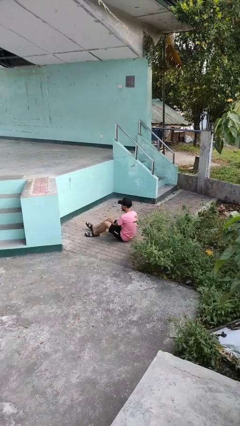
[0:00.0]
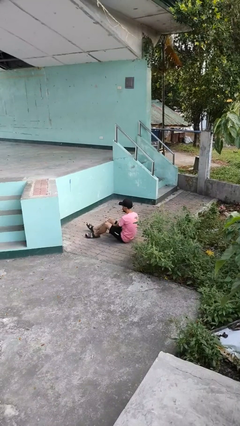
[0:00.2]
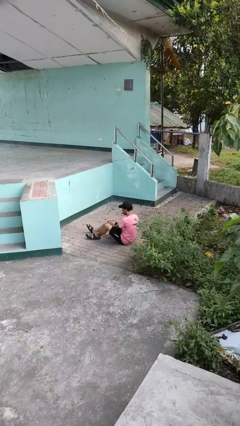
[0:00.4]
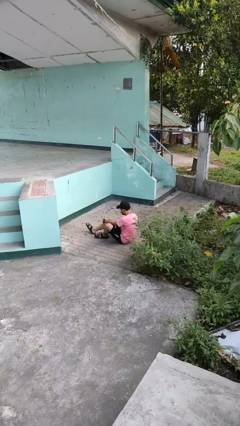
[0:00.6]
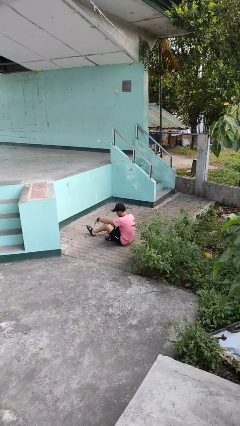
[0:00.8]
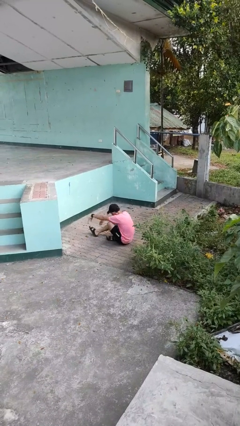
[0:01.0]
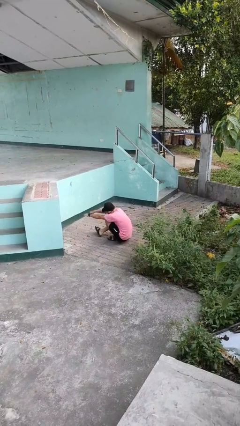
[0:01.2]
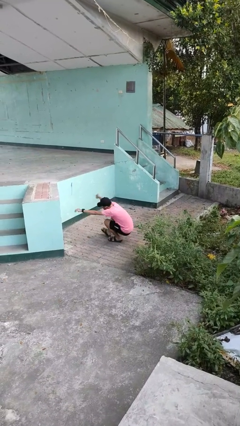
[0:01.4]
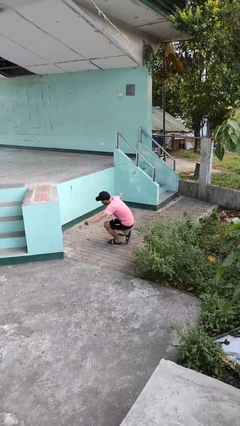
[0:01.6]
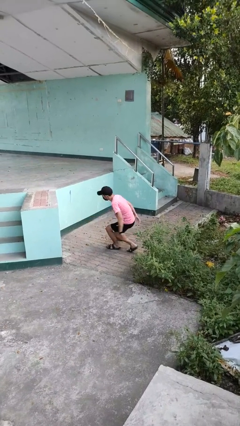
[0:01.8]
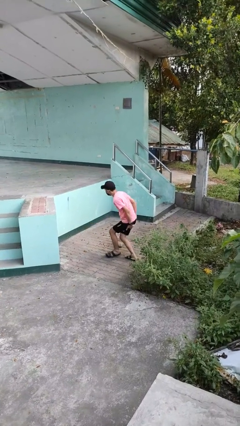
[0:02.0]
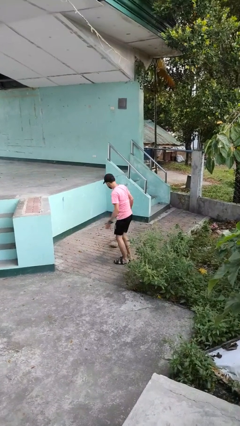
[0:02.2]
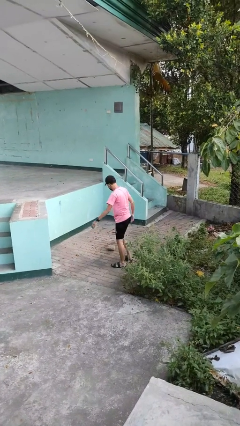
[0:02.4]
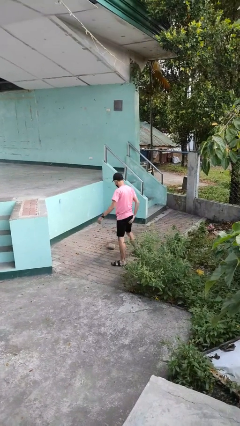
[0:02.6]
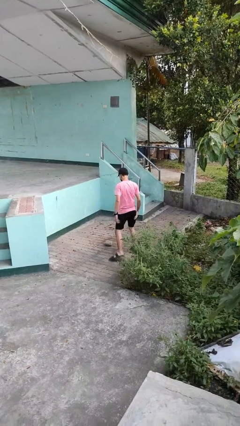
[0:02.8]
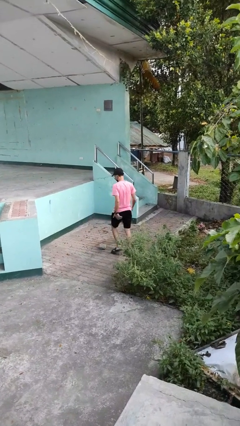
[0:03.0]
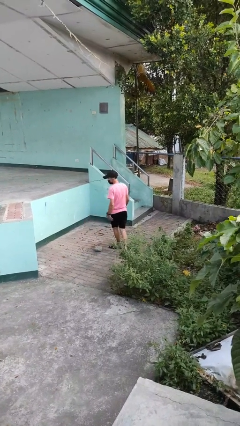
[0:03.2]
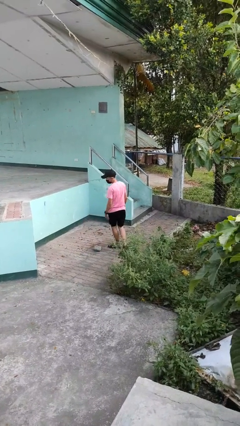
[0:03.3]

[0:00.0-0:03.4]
person stands up from floor

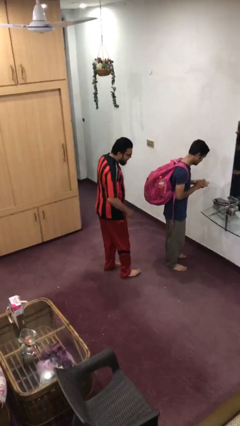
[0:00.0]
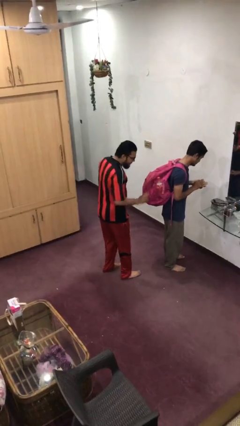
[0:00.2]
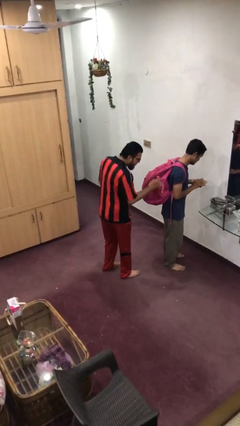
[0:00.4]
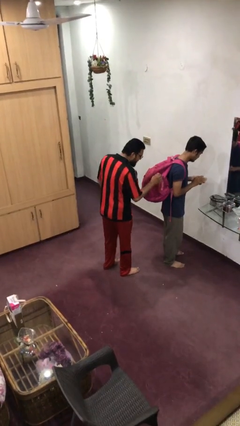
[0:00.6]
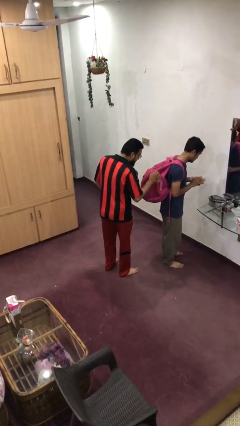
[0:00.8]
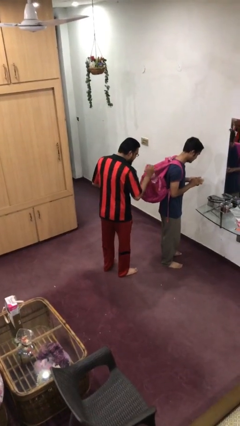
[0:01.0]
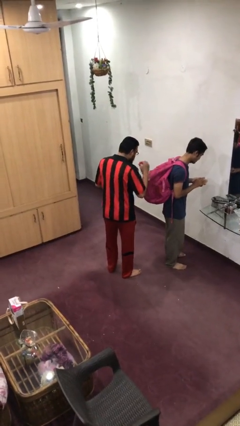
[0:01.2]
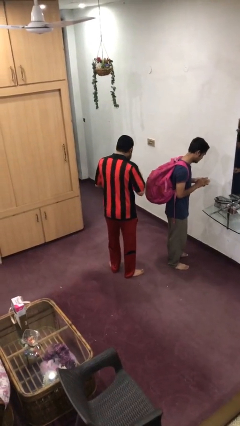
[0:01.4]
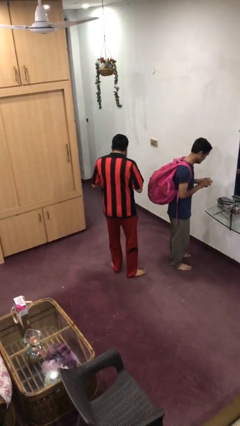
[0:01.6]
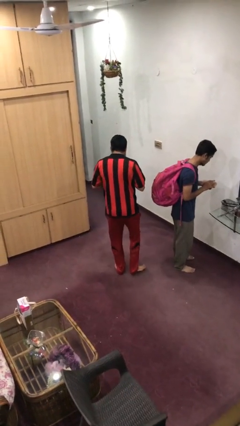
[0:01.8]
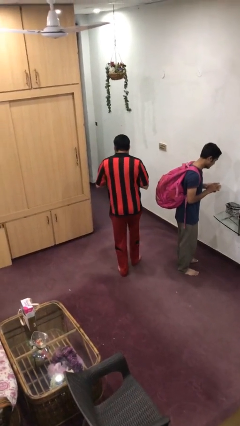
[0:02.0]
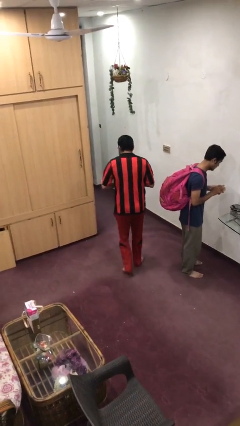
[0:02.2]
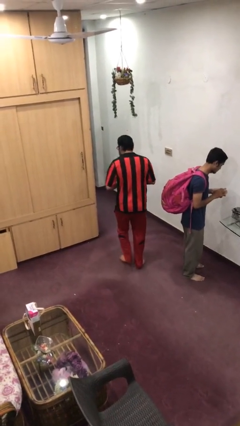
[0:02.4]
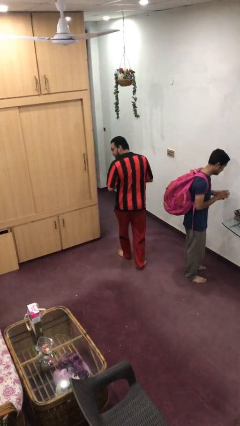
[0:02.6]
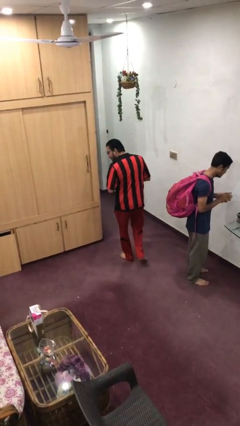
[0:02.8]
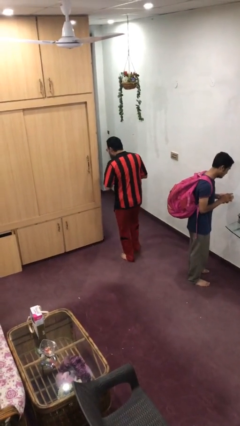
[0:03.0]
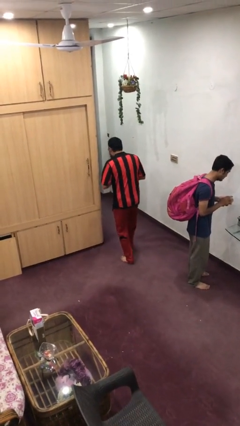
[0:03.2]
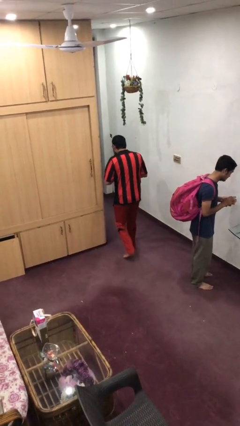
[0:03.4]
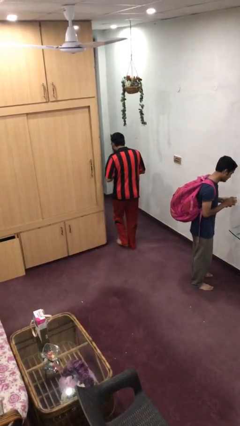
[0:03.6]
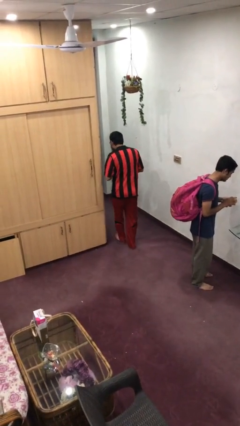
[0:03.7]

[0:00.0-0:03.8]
person steals object from person

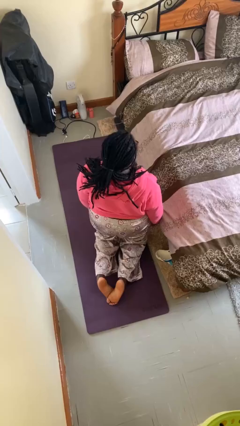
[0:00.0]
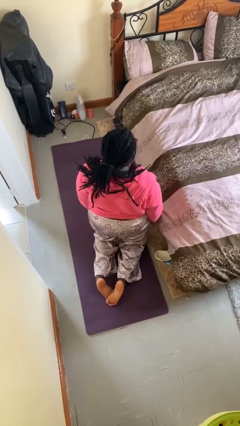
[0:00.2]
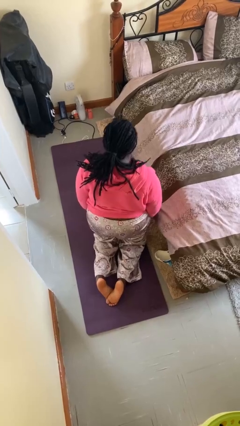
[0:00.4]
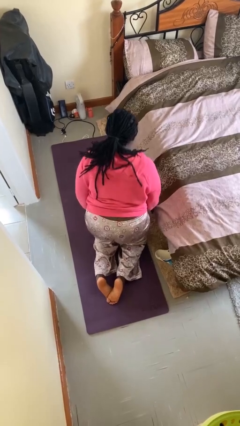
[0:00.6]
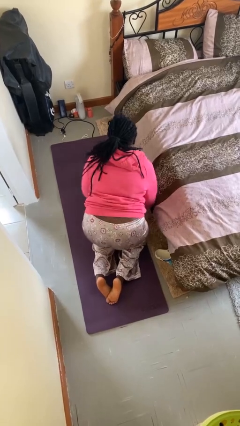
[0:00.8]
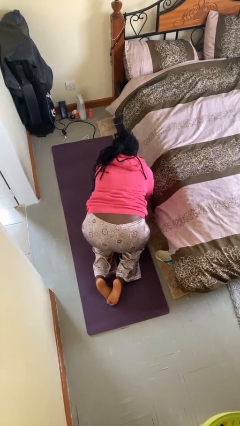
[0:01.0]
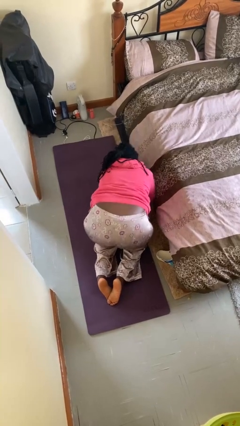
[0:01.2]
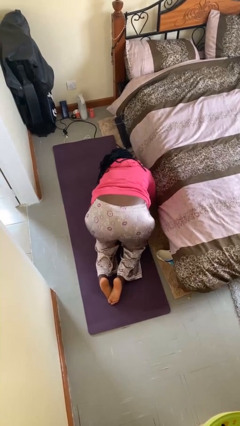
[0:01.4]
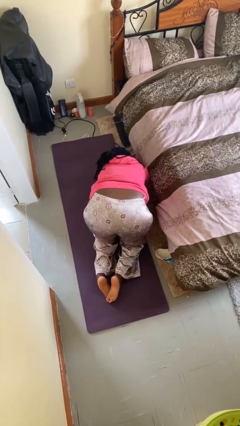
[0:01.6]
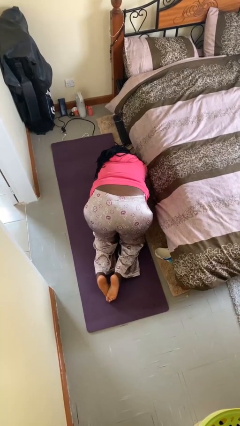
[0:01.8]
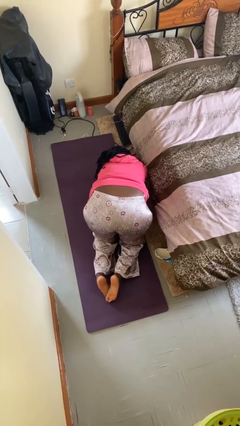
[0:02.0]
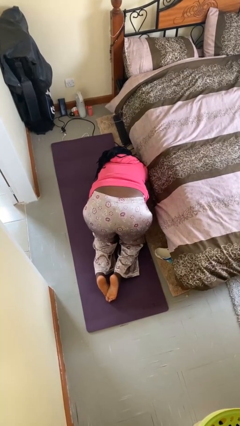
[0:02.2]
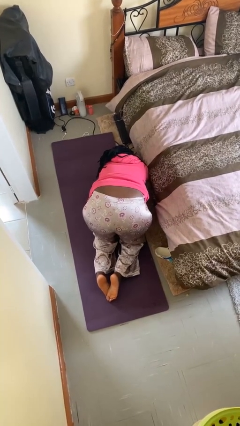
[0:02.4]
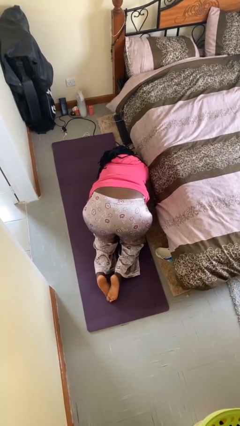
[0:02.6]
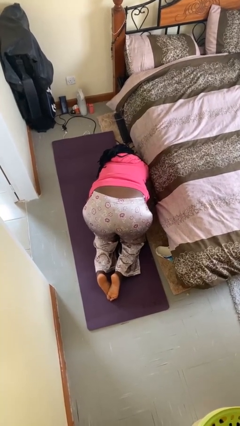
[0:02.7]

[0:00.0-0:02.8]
person searches under bed

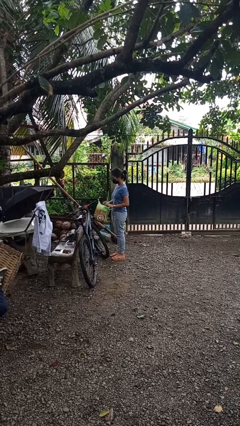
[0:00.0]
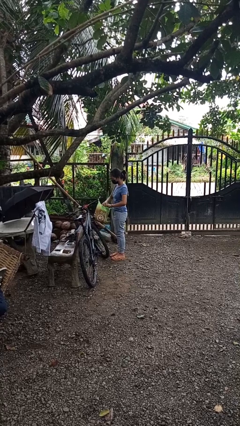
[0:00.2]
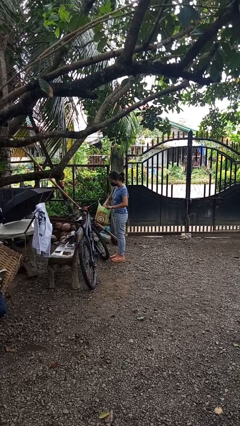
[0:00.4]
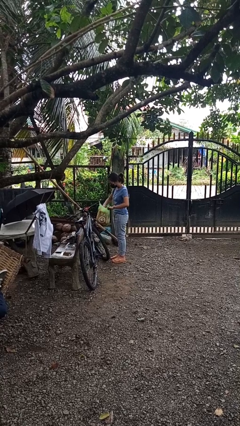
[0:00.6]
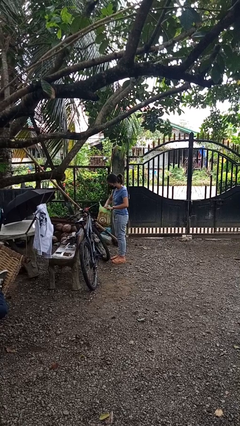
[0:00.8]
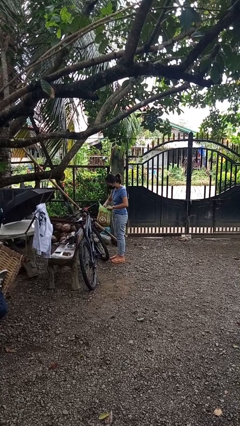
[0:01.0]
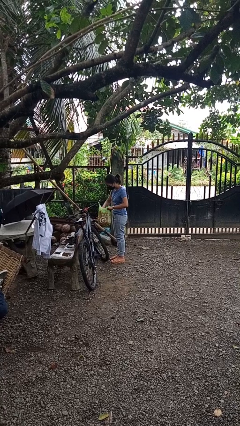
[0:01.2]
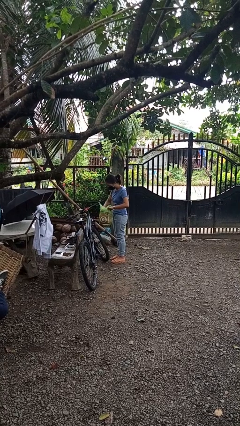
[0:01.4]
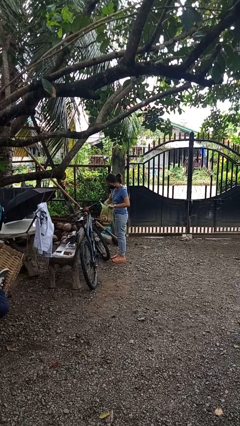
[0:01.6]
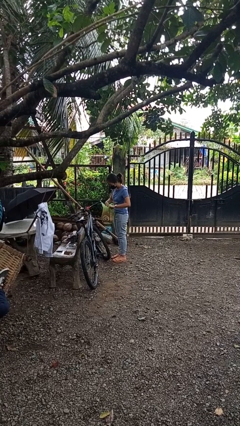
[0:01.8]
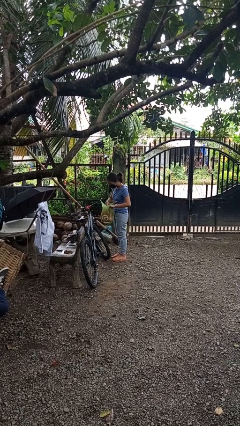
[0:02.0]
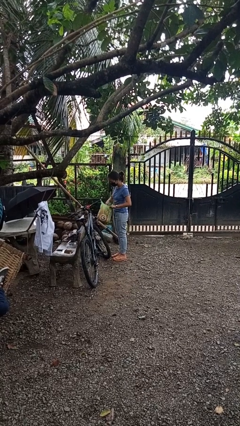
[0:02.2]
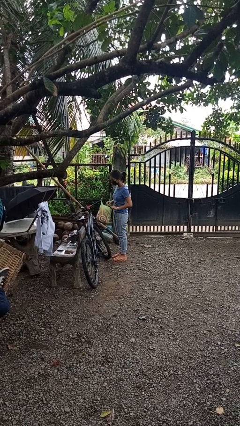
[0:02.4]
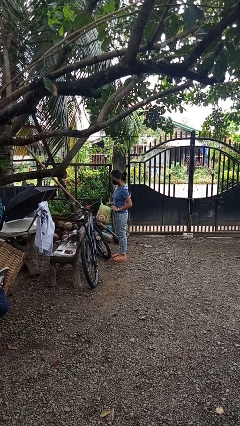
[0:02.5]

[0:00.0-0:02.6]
person searches in bag

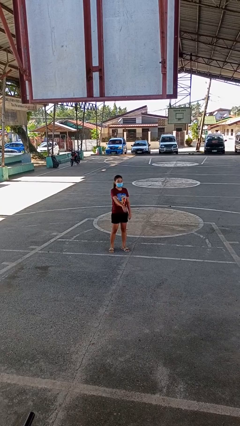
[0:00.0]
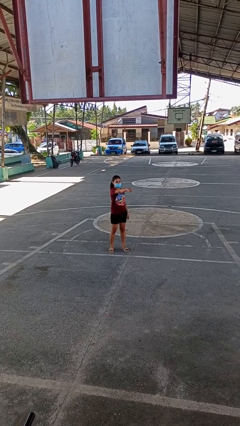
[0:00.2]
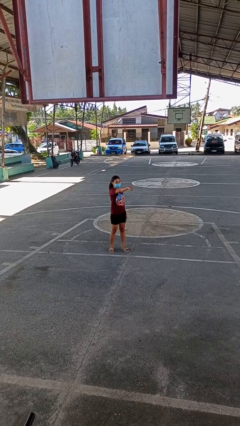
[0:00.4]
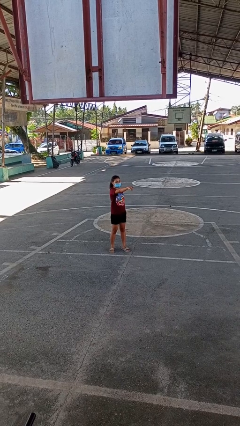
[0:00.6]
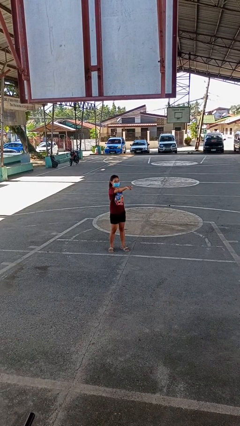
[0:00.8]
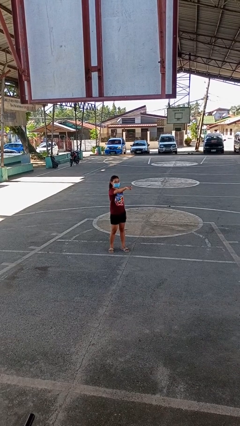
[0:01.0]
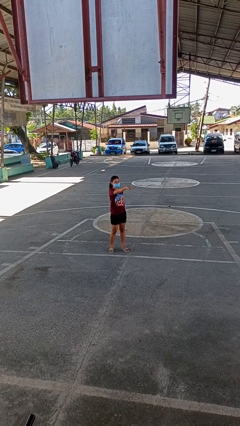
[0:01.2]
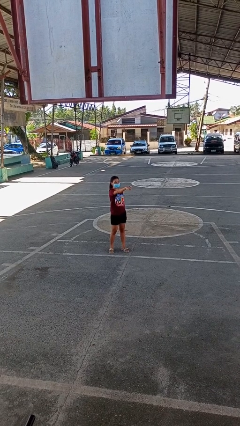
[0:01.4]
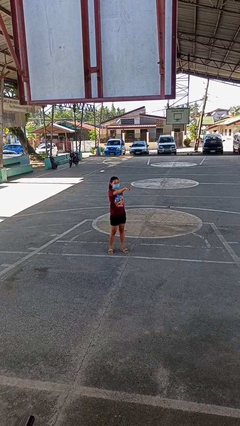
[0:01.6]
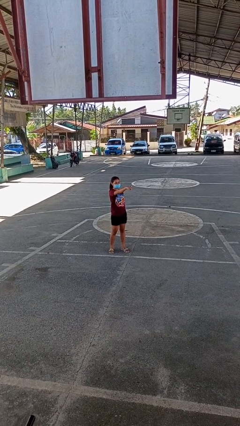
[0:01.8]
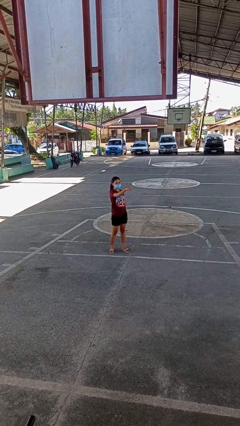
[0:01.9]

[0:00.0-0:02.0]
person points at person

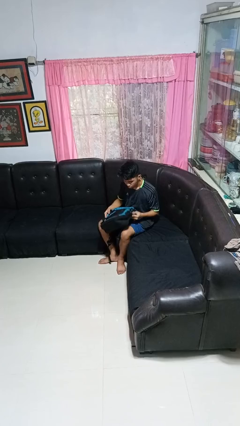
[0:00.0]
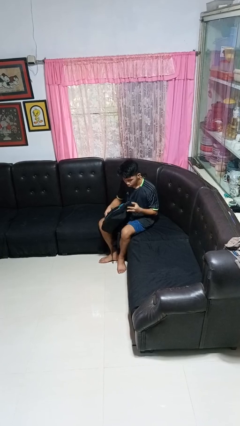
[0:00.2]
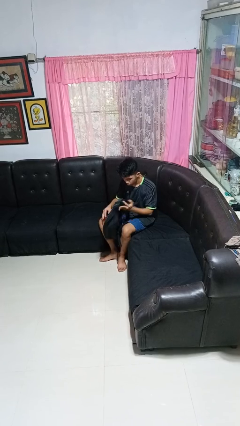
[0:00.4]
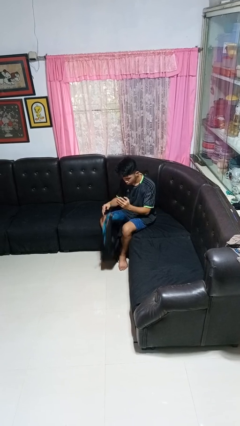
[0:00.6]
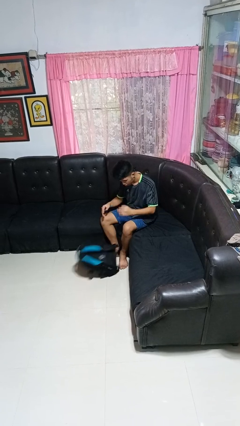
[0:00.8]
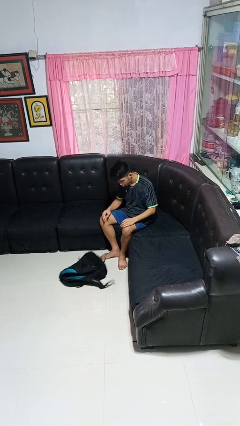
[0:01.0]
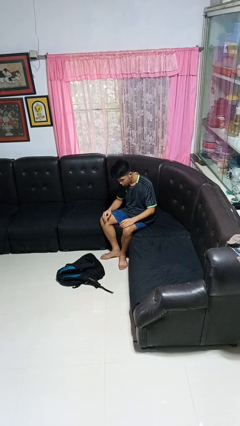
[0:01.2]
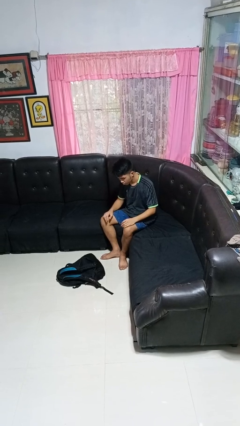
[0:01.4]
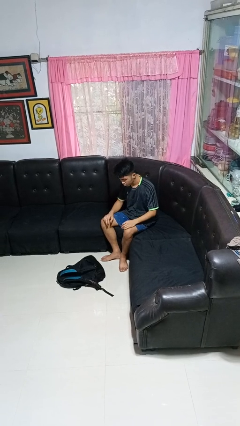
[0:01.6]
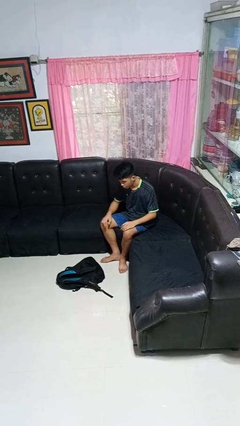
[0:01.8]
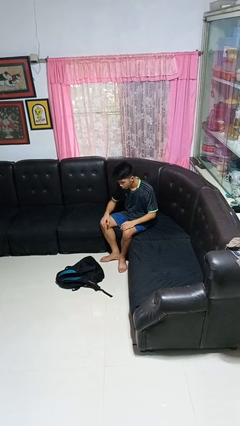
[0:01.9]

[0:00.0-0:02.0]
person drops object

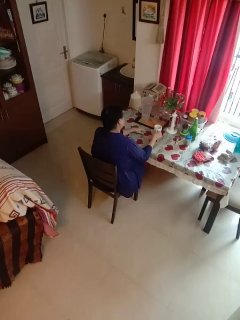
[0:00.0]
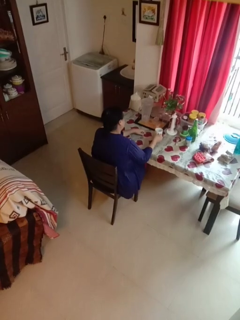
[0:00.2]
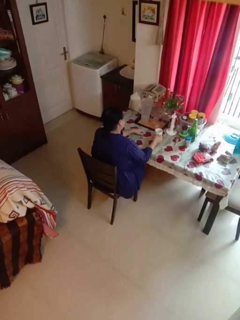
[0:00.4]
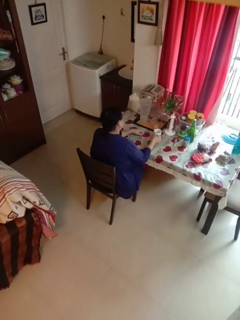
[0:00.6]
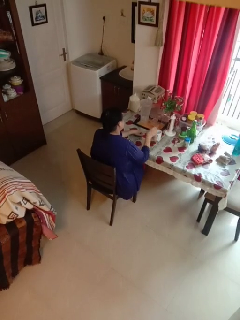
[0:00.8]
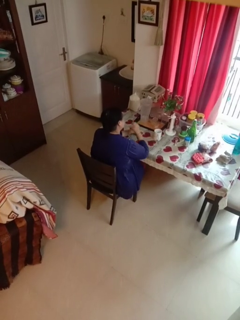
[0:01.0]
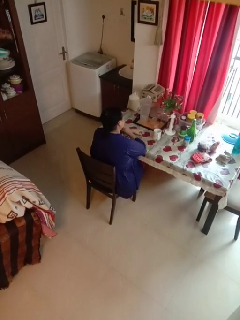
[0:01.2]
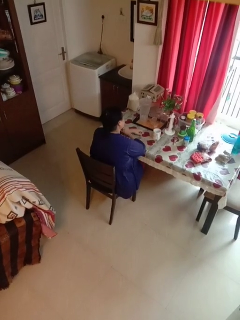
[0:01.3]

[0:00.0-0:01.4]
person puts down object on table
